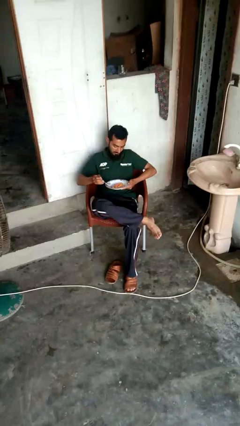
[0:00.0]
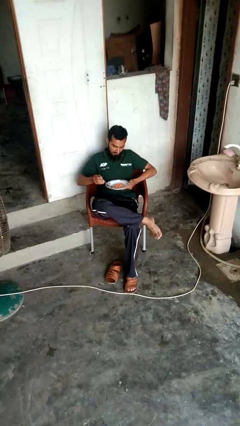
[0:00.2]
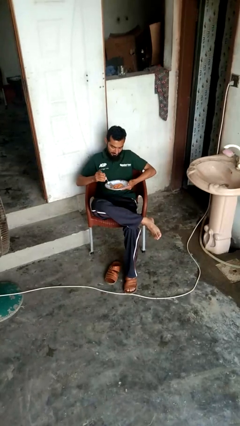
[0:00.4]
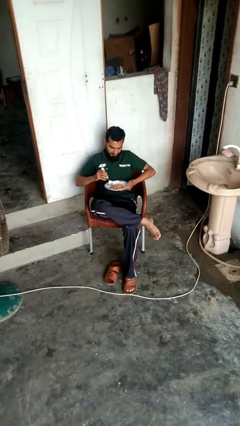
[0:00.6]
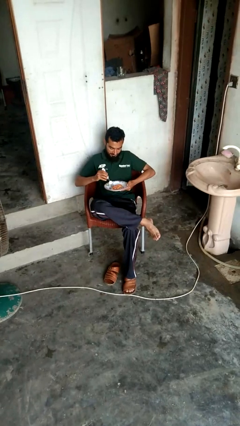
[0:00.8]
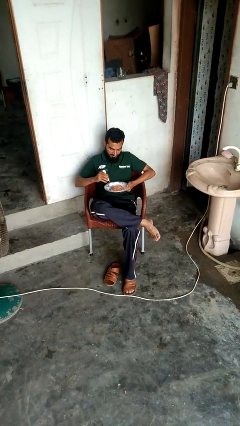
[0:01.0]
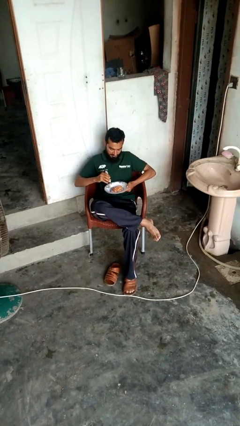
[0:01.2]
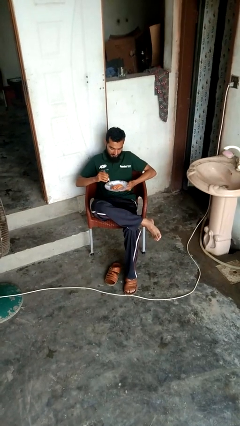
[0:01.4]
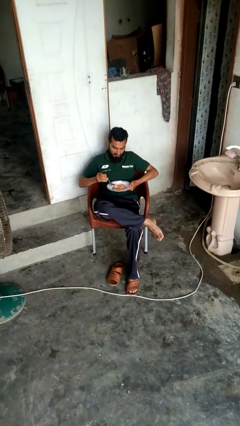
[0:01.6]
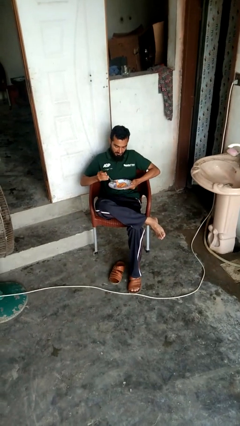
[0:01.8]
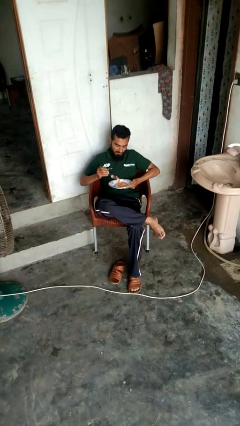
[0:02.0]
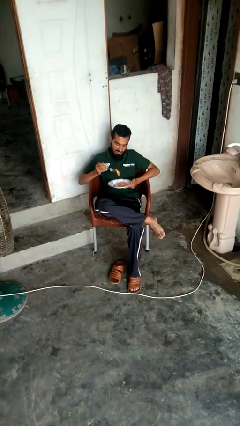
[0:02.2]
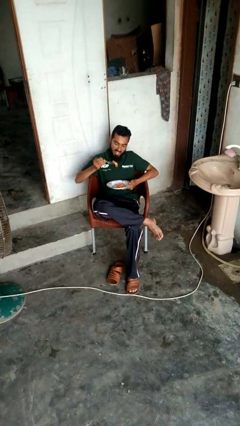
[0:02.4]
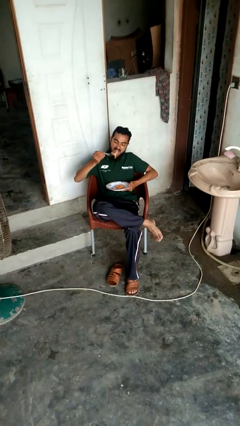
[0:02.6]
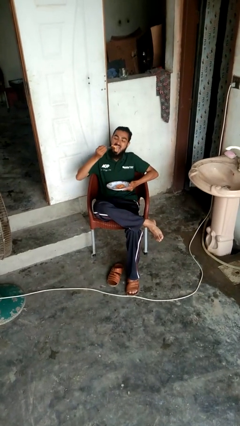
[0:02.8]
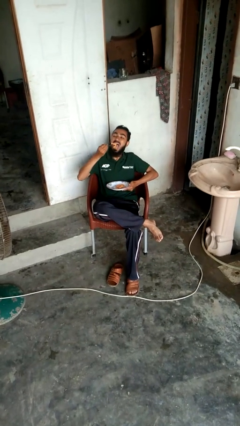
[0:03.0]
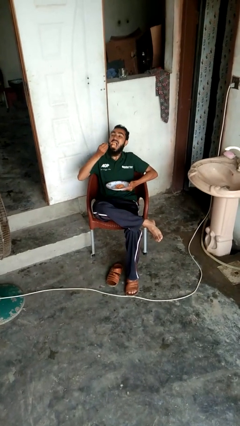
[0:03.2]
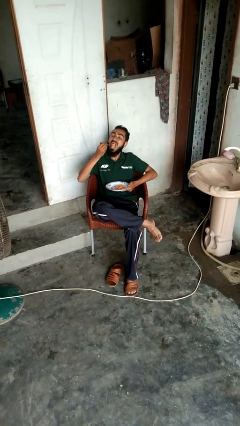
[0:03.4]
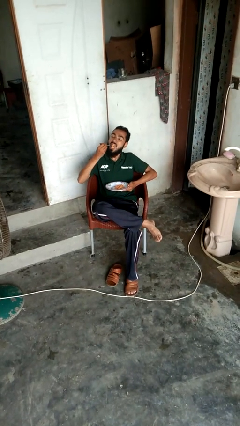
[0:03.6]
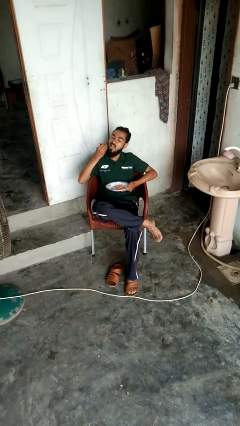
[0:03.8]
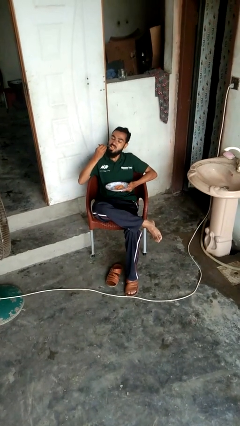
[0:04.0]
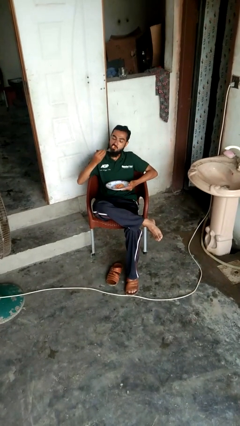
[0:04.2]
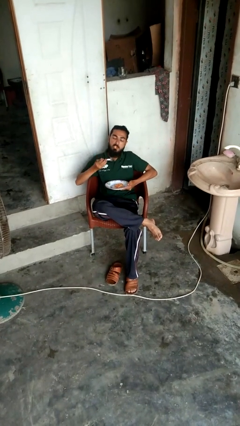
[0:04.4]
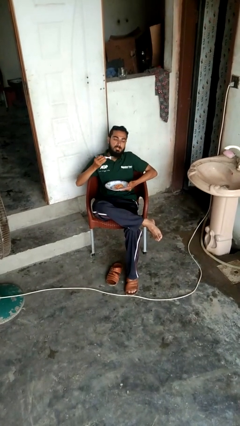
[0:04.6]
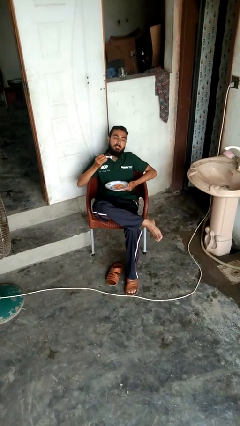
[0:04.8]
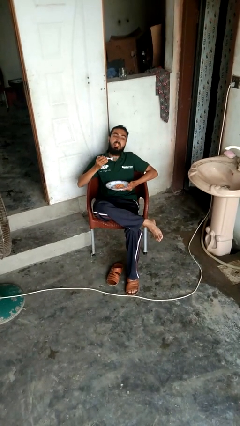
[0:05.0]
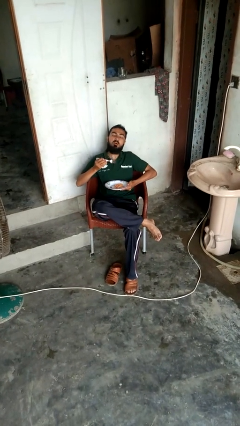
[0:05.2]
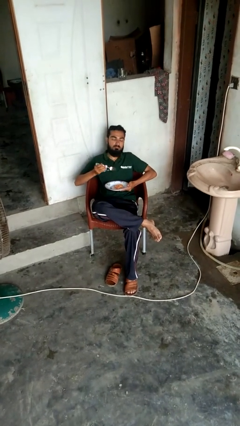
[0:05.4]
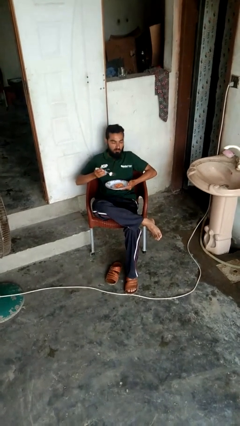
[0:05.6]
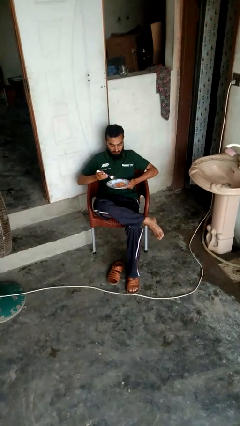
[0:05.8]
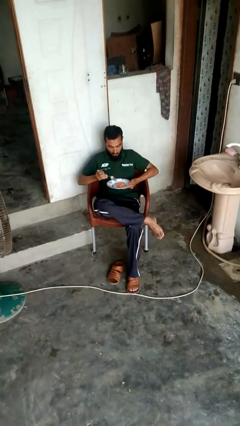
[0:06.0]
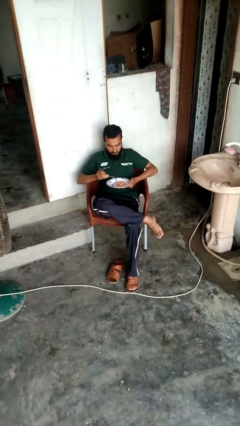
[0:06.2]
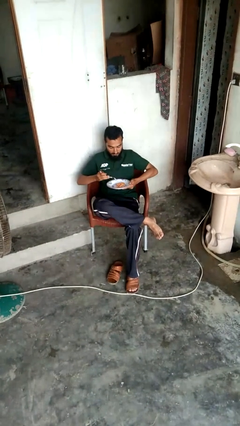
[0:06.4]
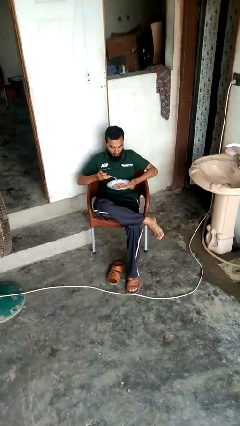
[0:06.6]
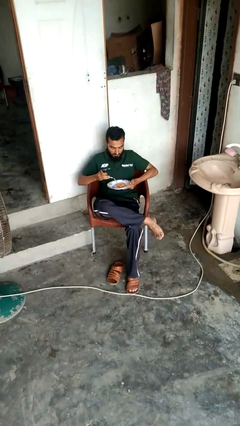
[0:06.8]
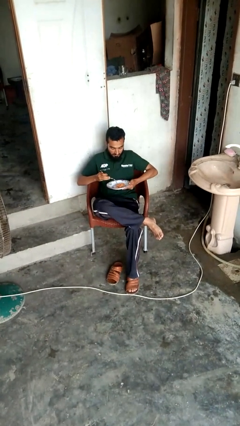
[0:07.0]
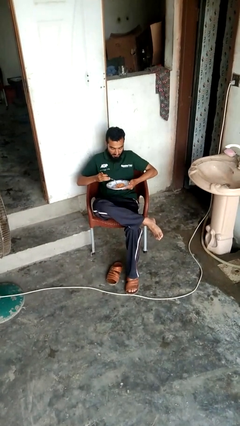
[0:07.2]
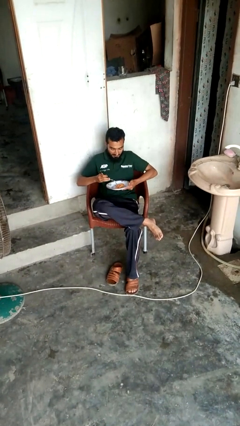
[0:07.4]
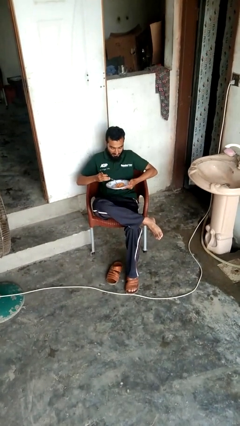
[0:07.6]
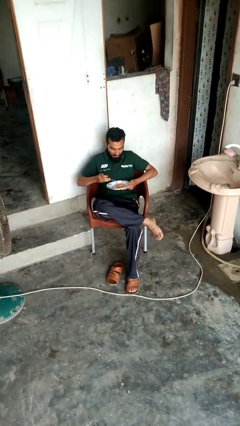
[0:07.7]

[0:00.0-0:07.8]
person eats with utensil

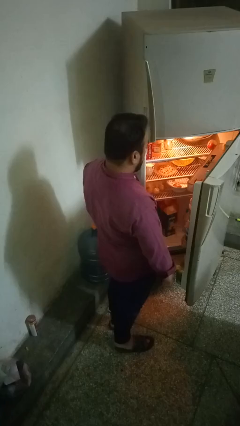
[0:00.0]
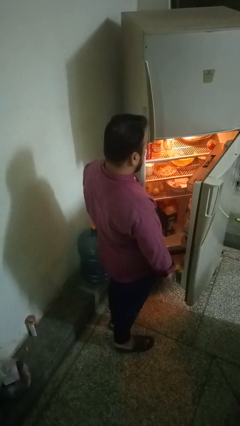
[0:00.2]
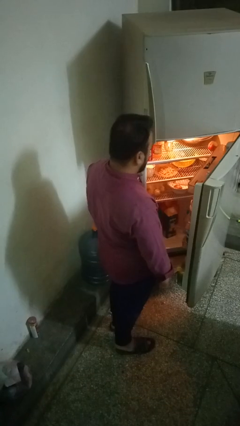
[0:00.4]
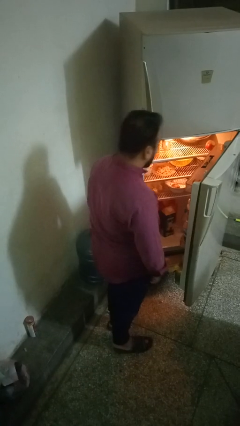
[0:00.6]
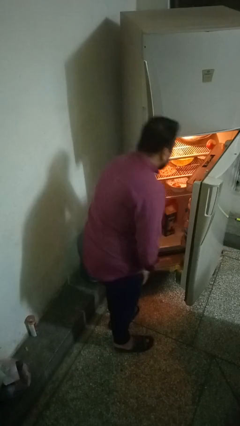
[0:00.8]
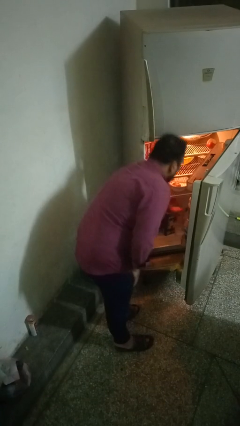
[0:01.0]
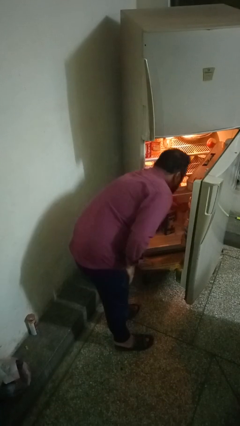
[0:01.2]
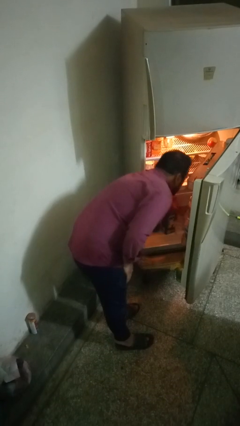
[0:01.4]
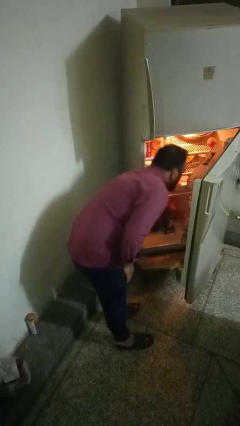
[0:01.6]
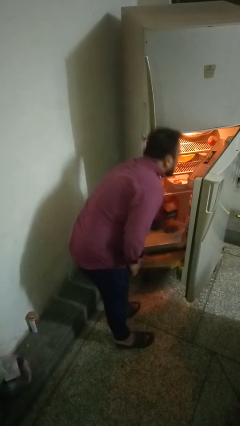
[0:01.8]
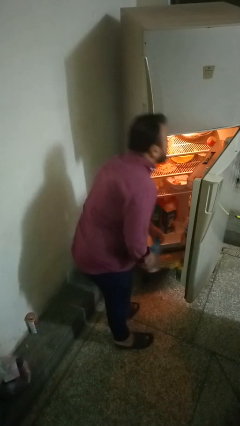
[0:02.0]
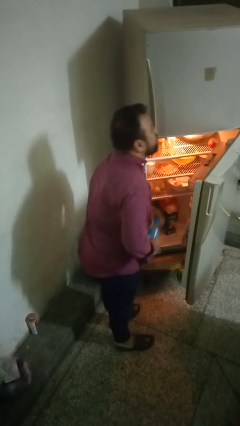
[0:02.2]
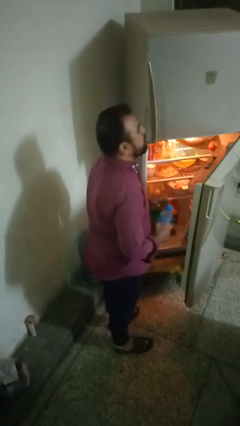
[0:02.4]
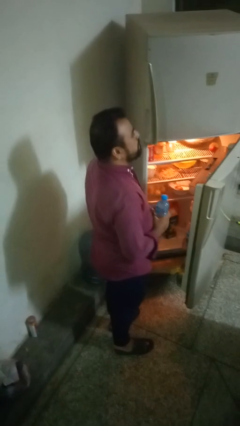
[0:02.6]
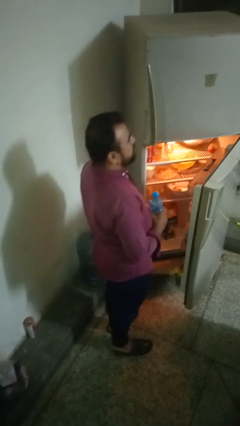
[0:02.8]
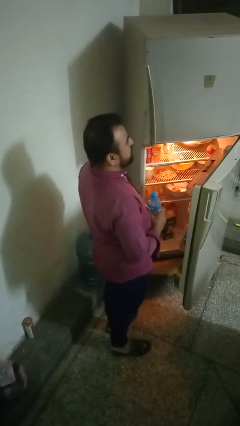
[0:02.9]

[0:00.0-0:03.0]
person takes object from refrigerator

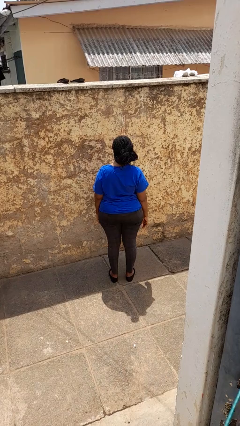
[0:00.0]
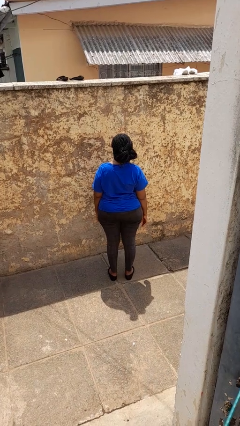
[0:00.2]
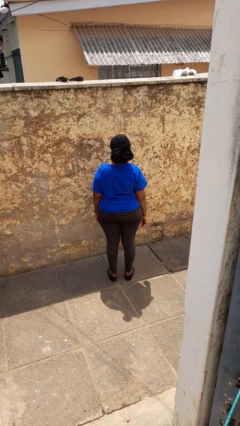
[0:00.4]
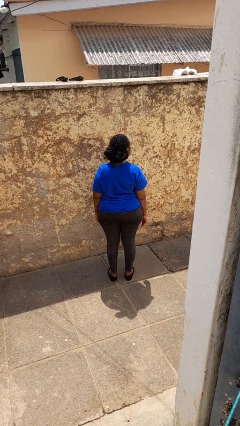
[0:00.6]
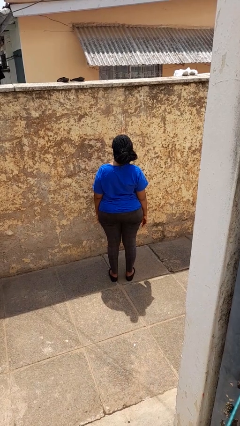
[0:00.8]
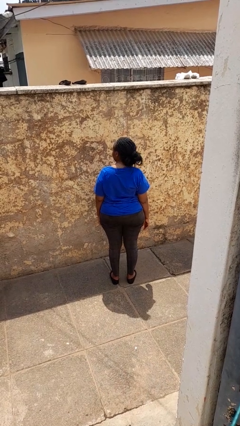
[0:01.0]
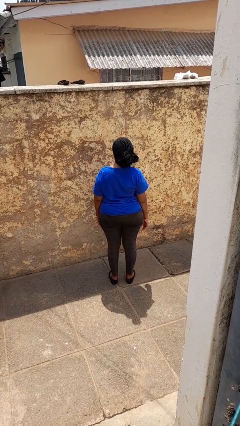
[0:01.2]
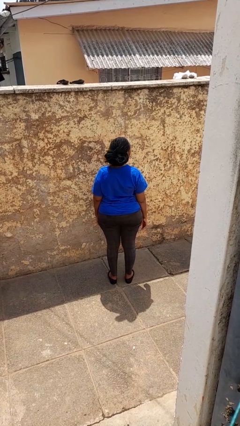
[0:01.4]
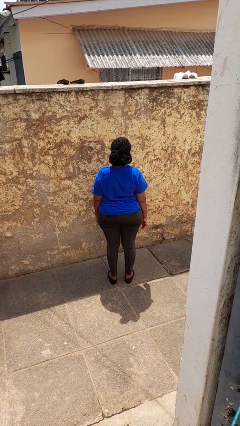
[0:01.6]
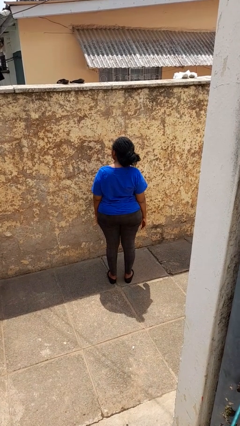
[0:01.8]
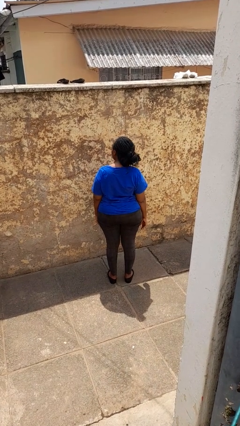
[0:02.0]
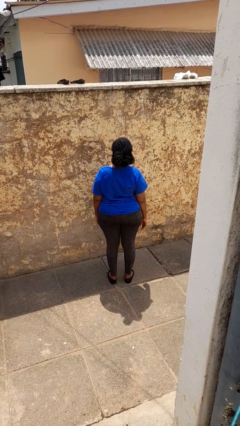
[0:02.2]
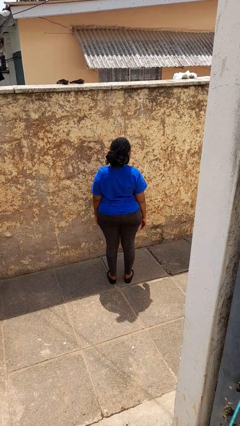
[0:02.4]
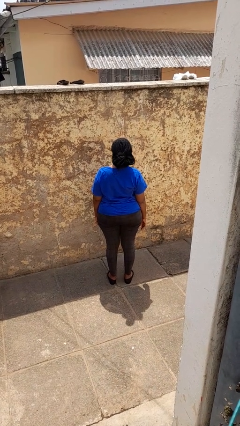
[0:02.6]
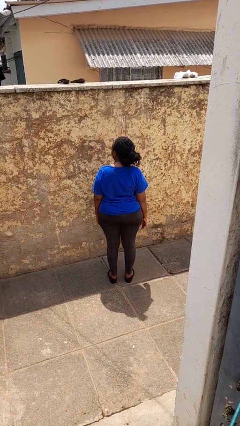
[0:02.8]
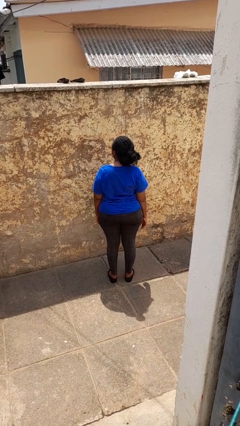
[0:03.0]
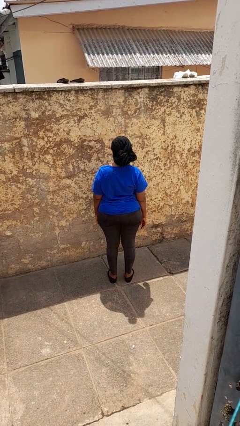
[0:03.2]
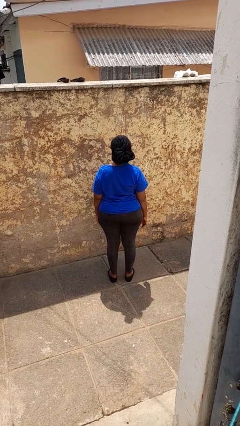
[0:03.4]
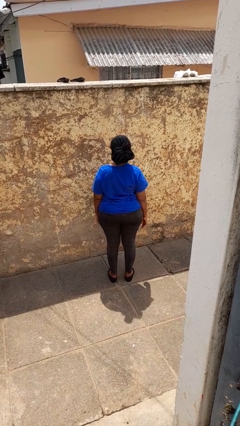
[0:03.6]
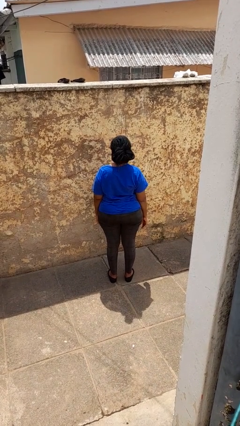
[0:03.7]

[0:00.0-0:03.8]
person shakes head

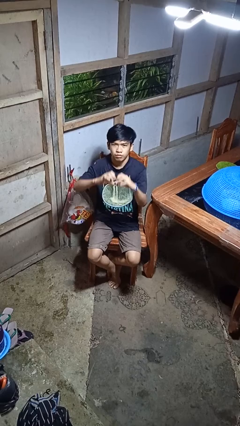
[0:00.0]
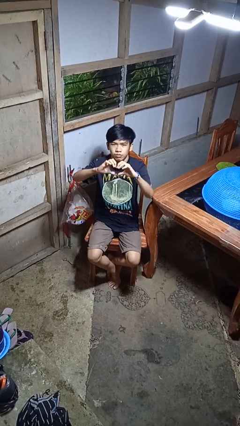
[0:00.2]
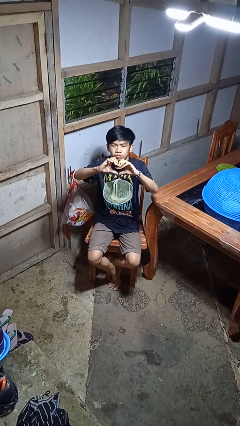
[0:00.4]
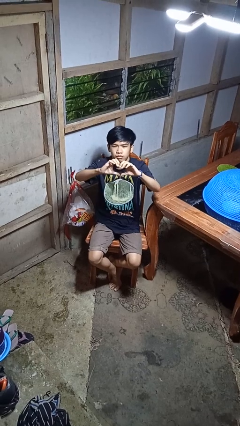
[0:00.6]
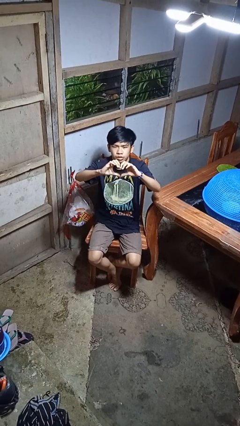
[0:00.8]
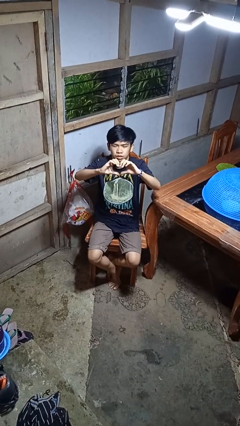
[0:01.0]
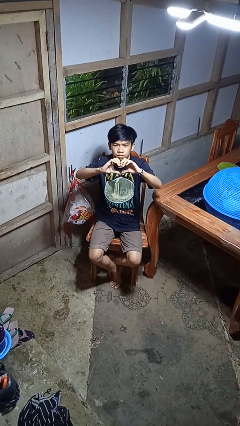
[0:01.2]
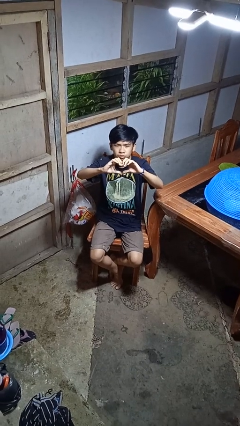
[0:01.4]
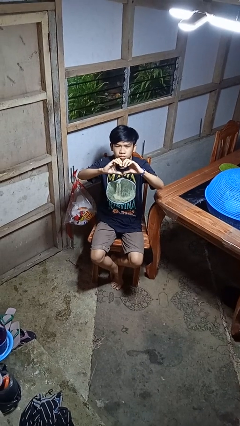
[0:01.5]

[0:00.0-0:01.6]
person gestures heart

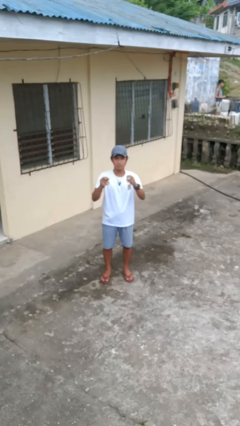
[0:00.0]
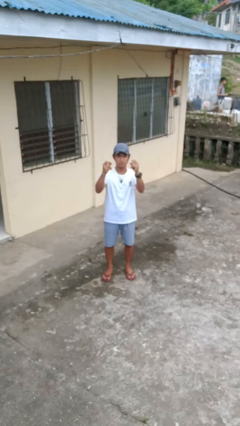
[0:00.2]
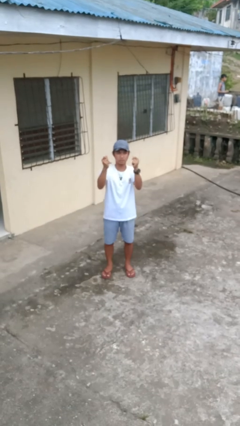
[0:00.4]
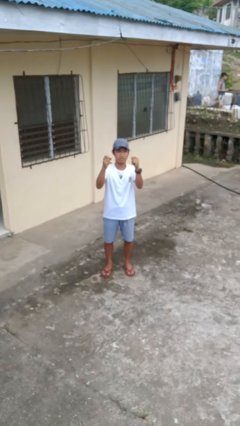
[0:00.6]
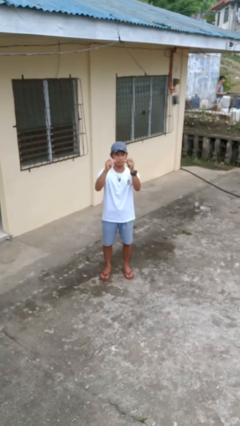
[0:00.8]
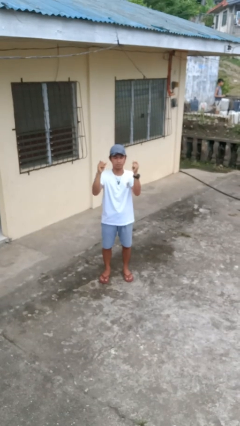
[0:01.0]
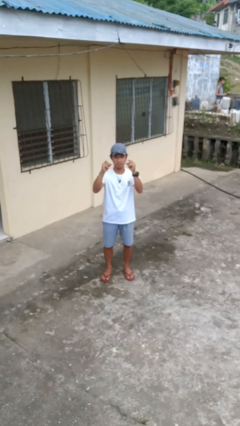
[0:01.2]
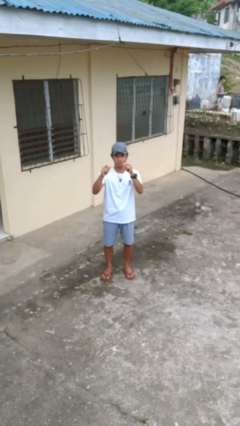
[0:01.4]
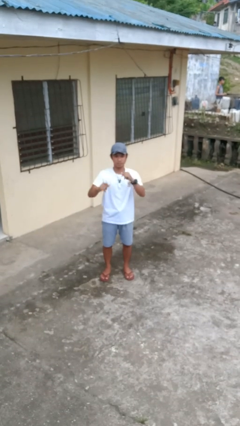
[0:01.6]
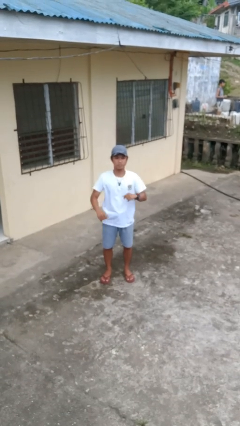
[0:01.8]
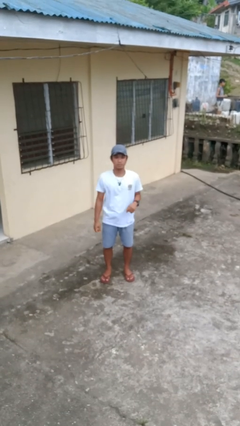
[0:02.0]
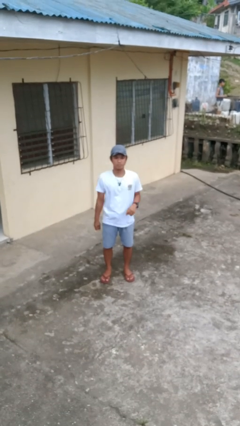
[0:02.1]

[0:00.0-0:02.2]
person snaps fingers
